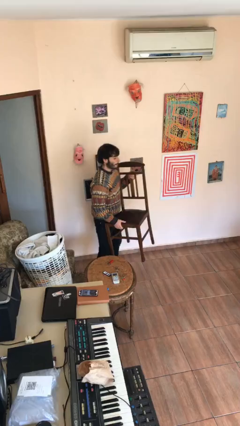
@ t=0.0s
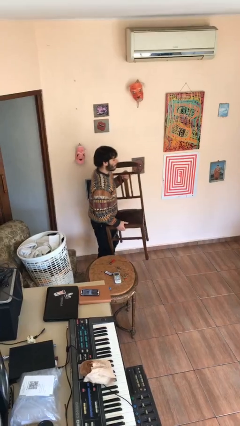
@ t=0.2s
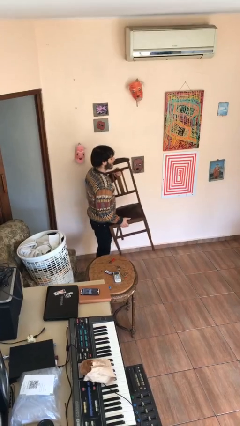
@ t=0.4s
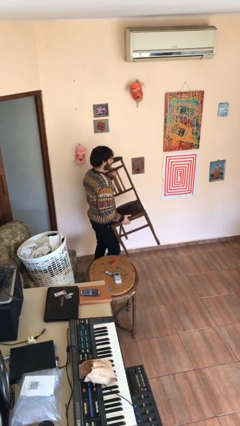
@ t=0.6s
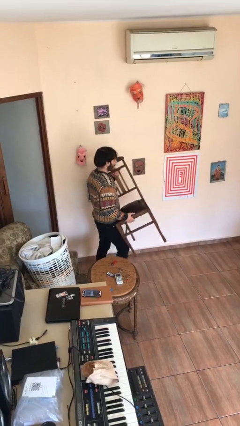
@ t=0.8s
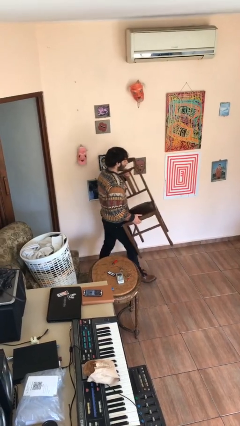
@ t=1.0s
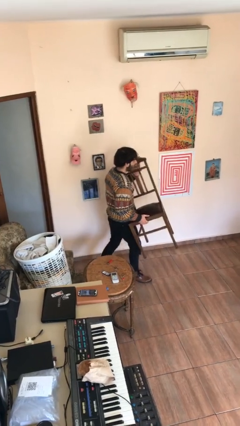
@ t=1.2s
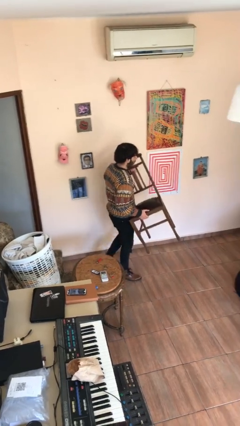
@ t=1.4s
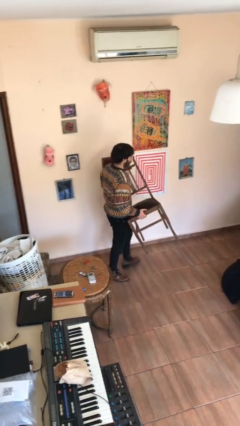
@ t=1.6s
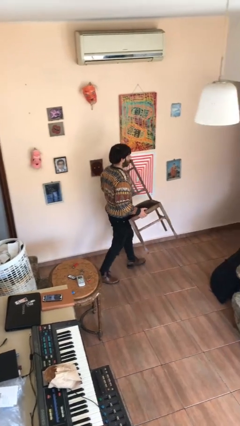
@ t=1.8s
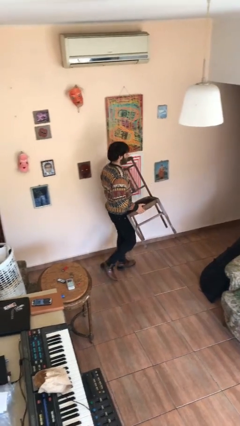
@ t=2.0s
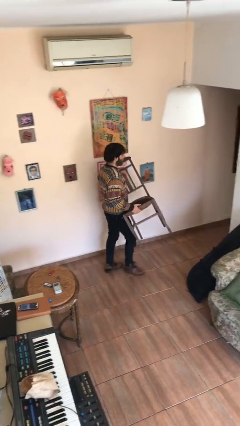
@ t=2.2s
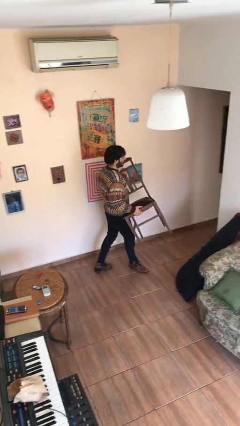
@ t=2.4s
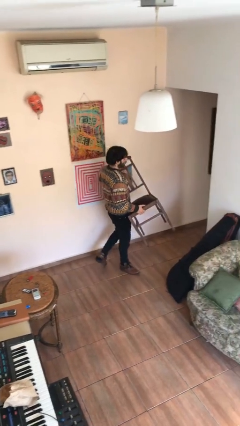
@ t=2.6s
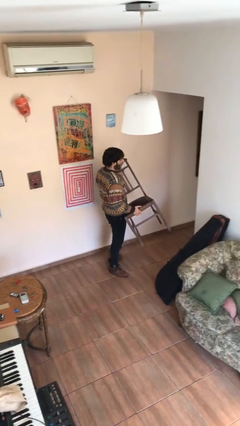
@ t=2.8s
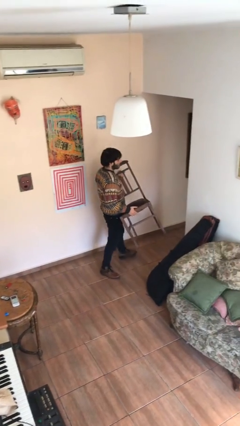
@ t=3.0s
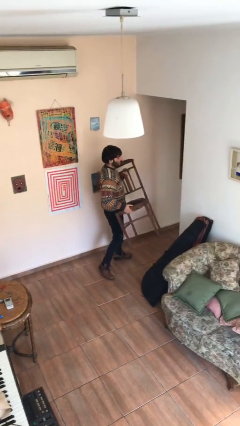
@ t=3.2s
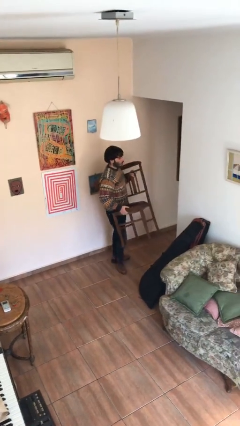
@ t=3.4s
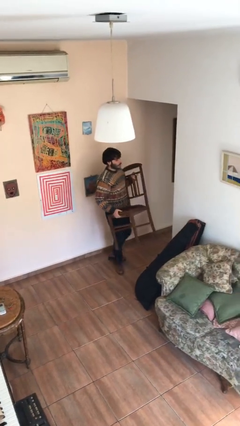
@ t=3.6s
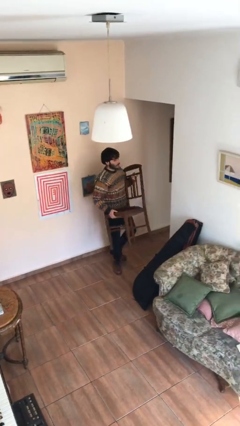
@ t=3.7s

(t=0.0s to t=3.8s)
person carries furniture

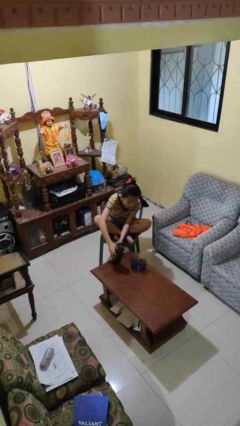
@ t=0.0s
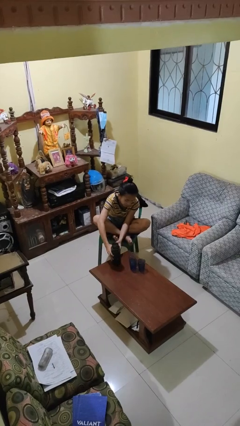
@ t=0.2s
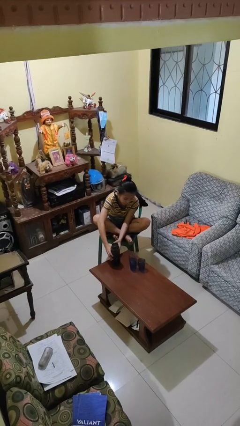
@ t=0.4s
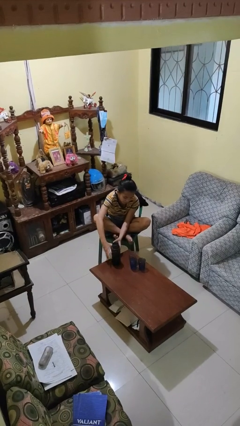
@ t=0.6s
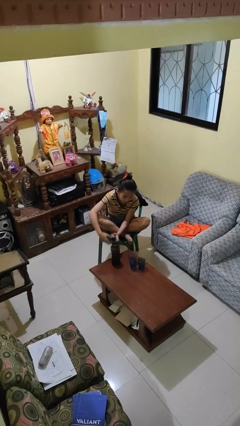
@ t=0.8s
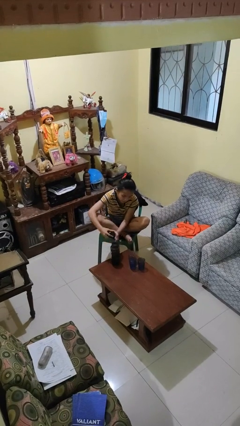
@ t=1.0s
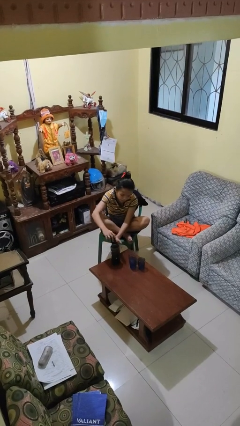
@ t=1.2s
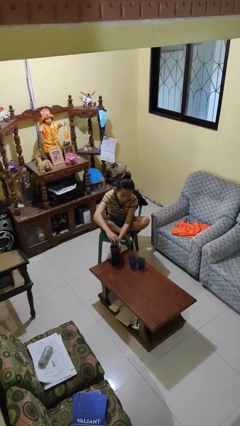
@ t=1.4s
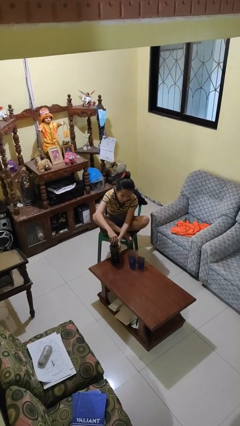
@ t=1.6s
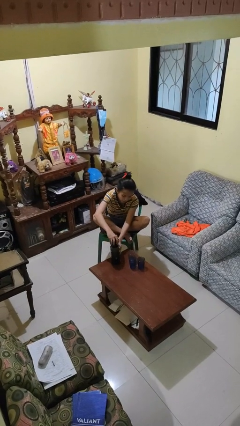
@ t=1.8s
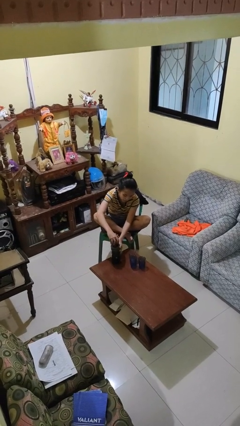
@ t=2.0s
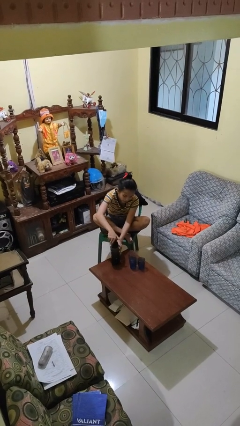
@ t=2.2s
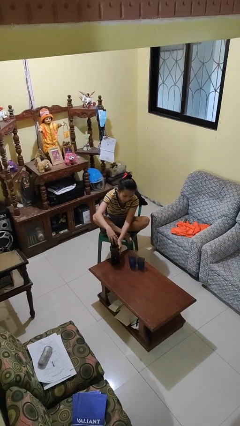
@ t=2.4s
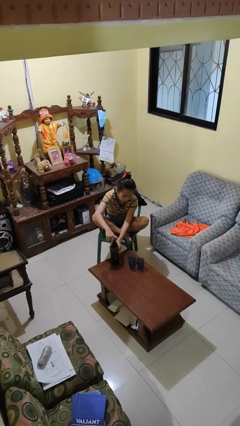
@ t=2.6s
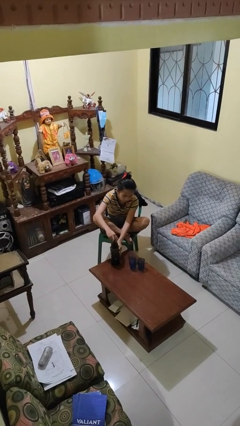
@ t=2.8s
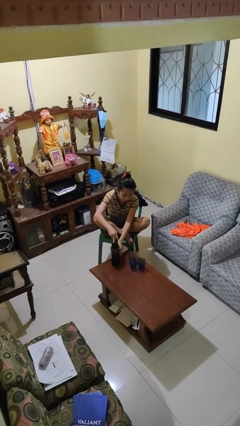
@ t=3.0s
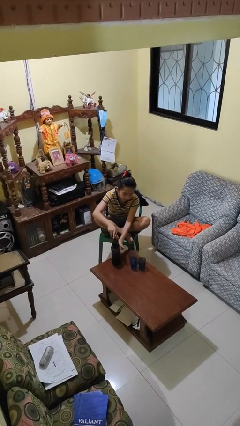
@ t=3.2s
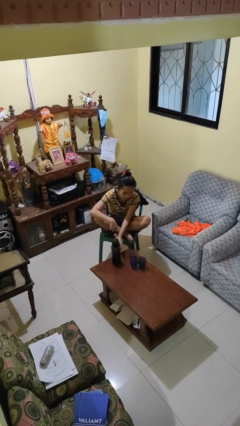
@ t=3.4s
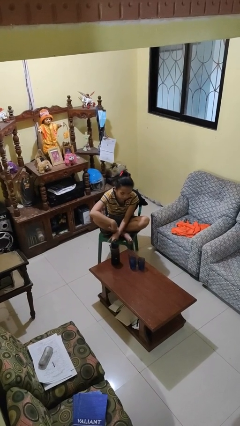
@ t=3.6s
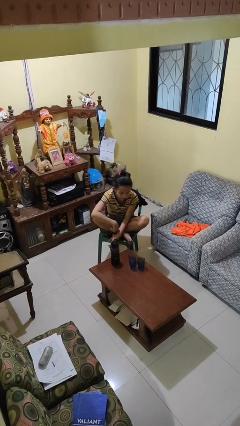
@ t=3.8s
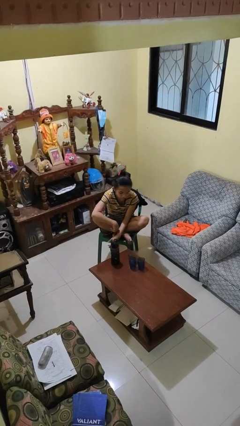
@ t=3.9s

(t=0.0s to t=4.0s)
person screws lid to bottle

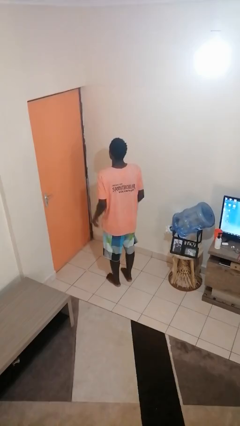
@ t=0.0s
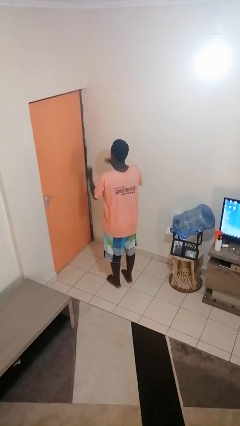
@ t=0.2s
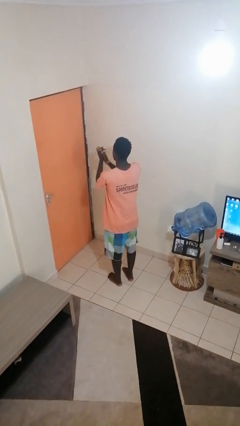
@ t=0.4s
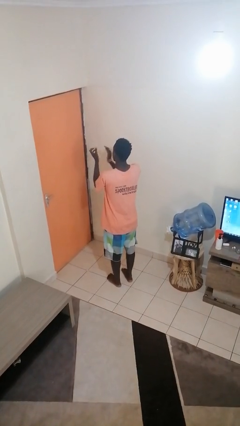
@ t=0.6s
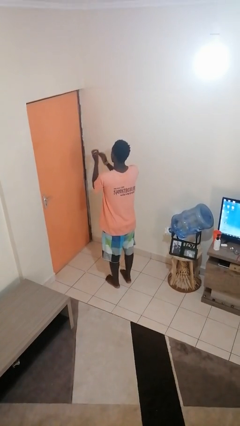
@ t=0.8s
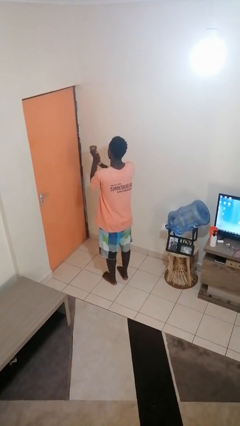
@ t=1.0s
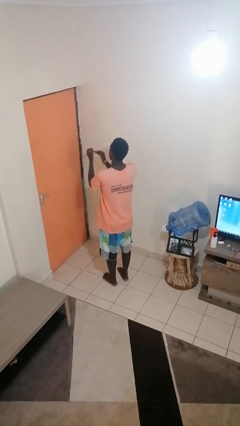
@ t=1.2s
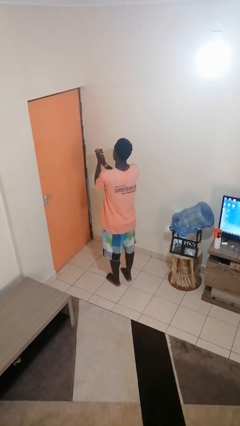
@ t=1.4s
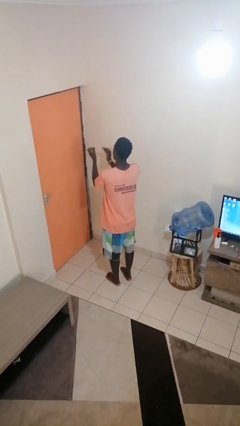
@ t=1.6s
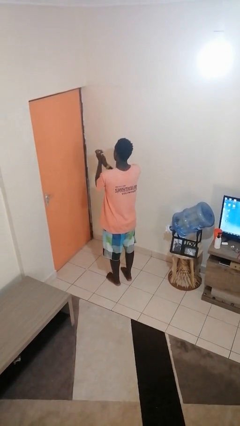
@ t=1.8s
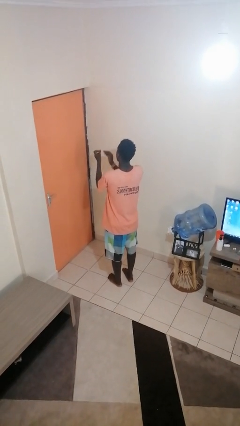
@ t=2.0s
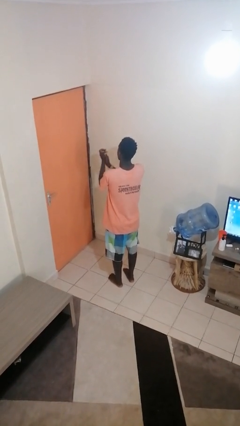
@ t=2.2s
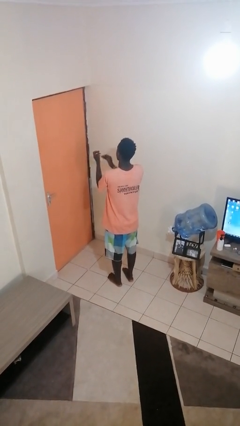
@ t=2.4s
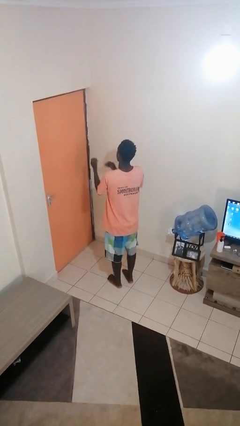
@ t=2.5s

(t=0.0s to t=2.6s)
person claps hands

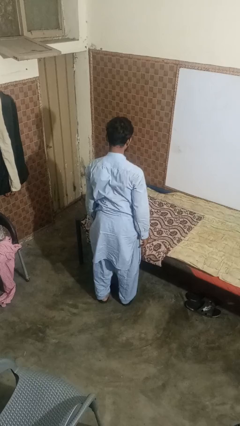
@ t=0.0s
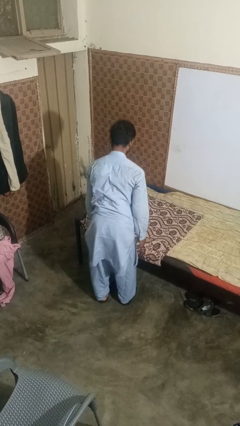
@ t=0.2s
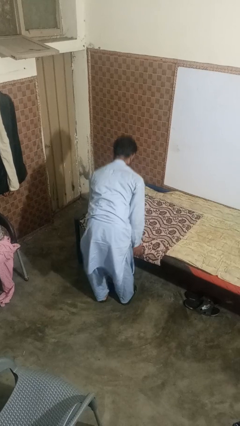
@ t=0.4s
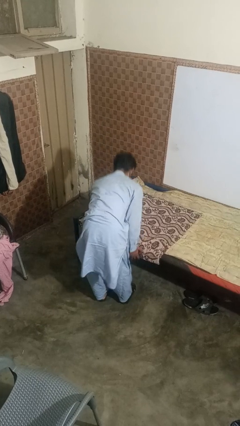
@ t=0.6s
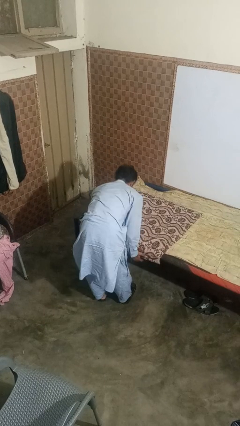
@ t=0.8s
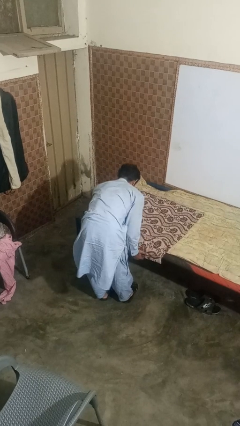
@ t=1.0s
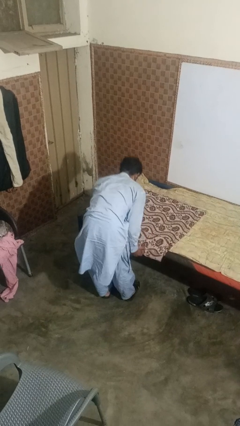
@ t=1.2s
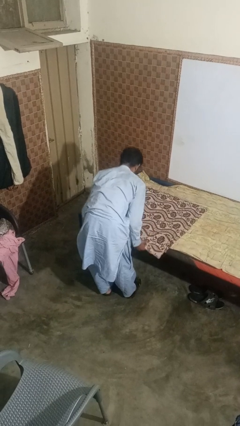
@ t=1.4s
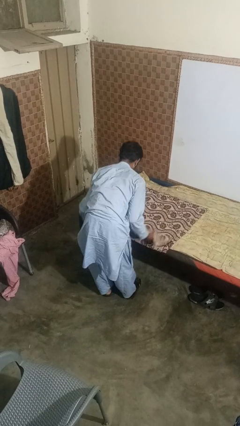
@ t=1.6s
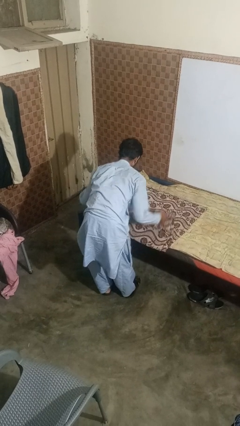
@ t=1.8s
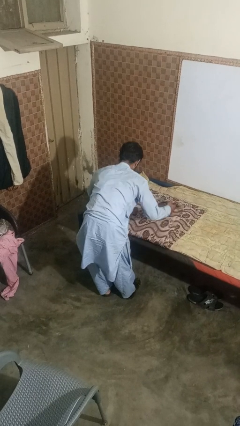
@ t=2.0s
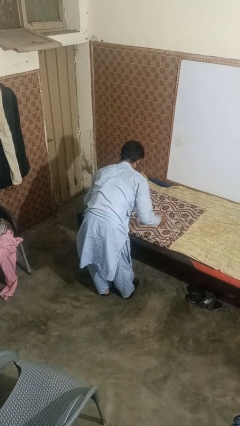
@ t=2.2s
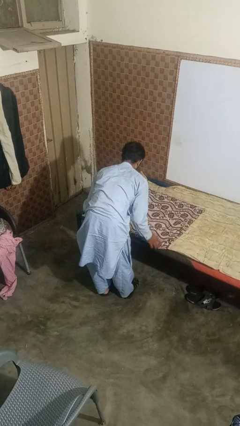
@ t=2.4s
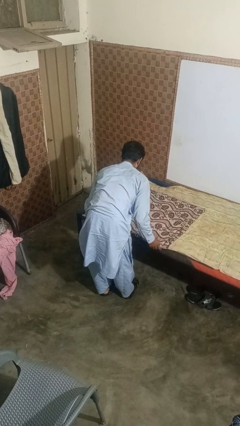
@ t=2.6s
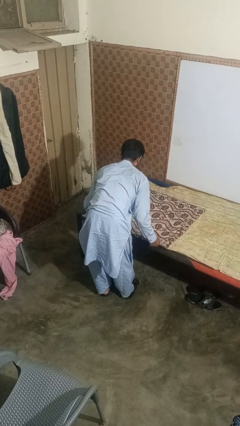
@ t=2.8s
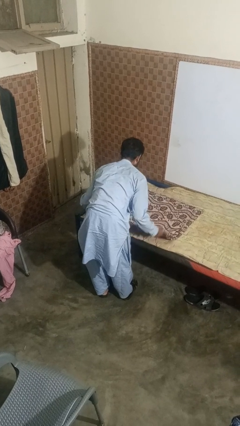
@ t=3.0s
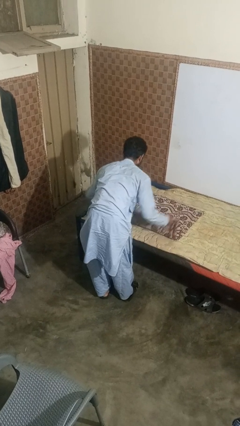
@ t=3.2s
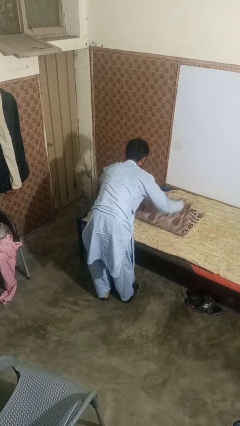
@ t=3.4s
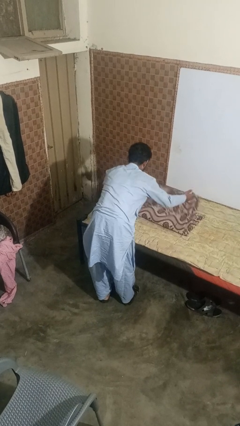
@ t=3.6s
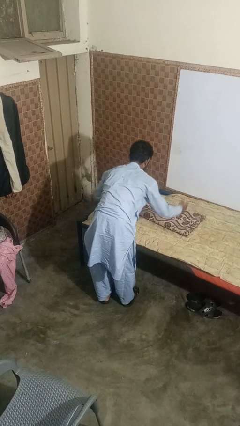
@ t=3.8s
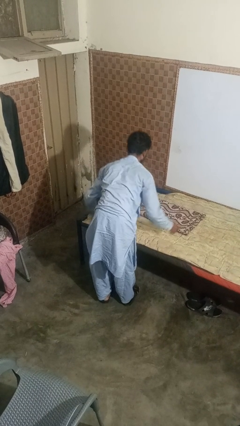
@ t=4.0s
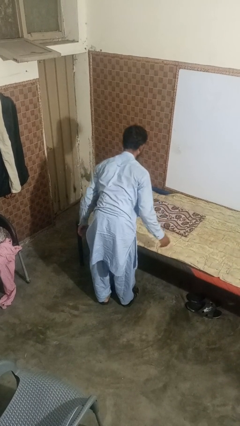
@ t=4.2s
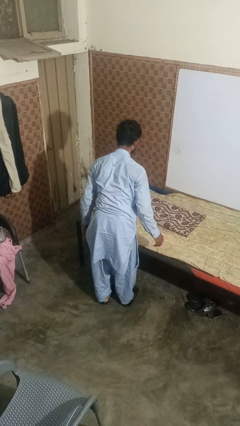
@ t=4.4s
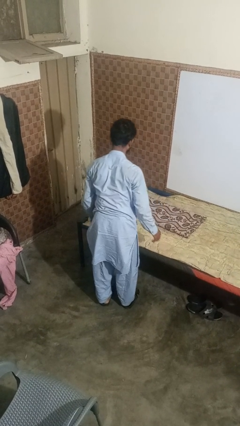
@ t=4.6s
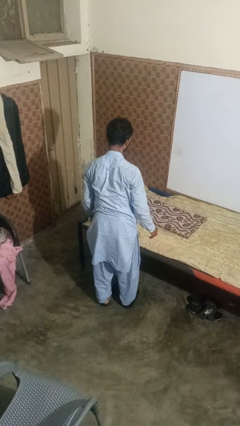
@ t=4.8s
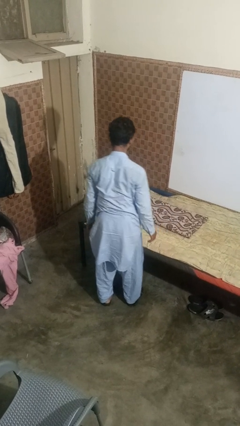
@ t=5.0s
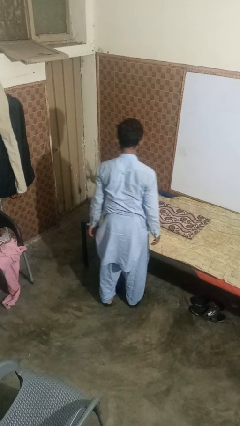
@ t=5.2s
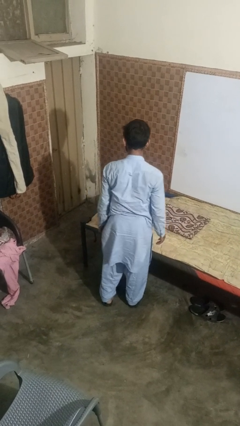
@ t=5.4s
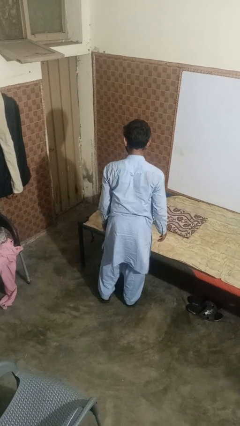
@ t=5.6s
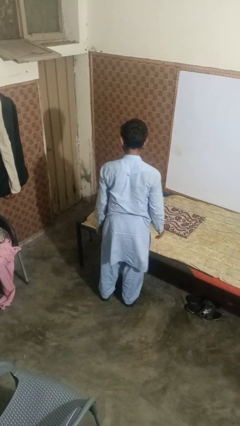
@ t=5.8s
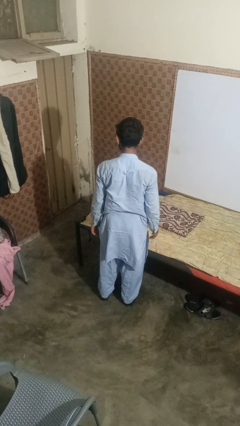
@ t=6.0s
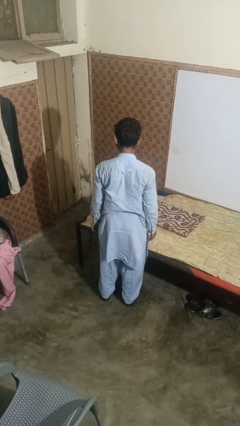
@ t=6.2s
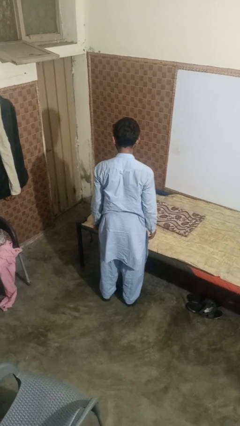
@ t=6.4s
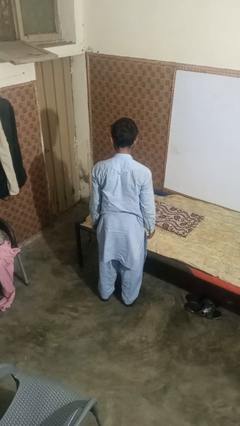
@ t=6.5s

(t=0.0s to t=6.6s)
person folds blanket

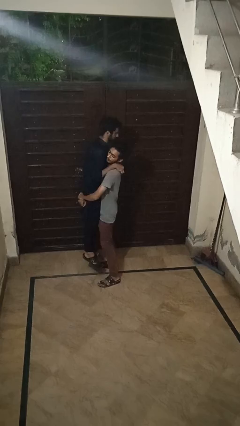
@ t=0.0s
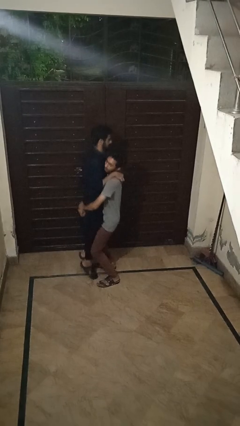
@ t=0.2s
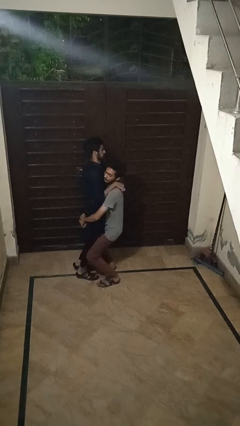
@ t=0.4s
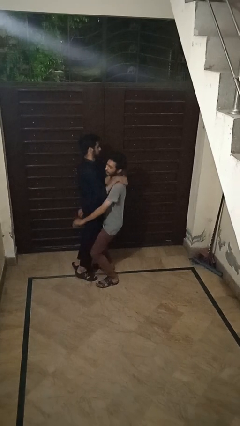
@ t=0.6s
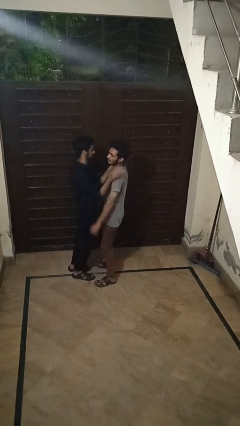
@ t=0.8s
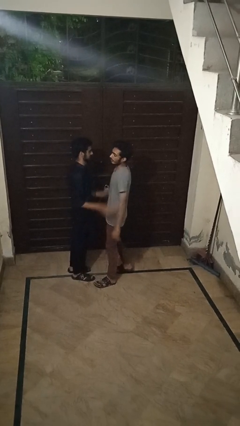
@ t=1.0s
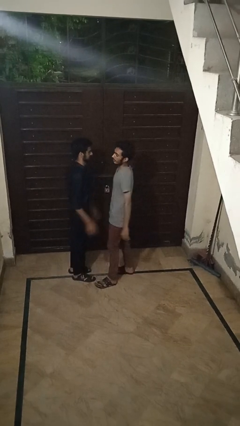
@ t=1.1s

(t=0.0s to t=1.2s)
person puts down person
